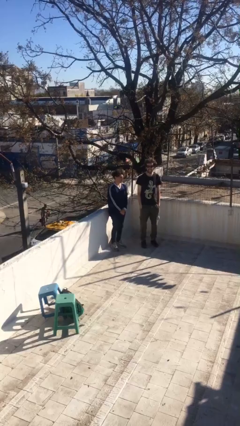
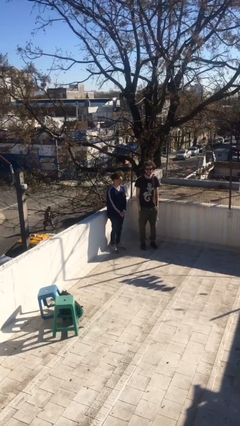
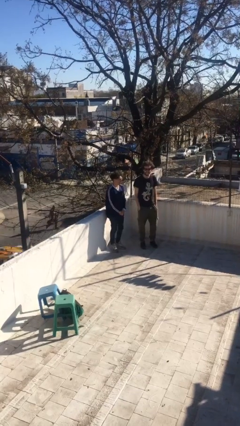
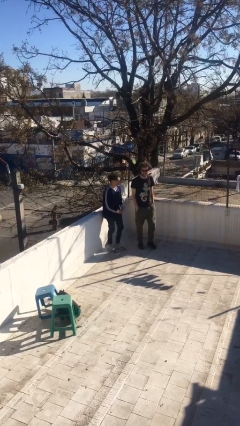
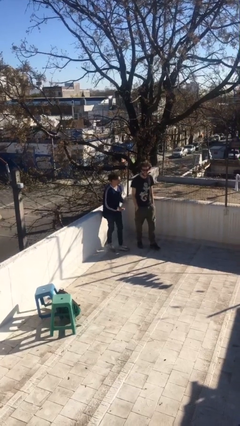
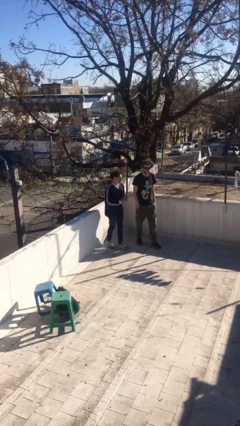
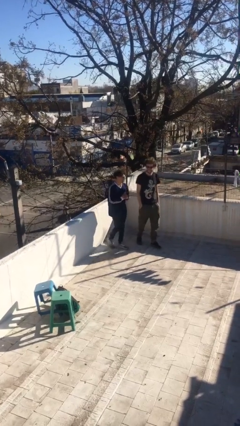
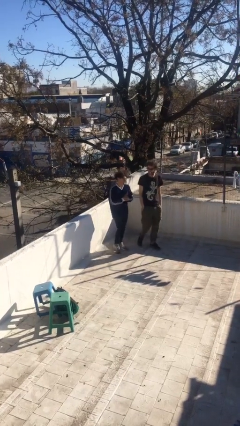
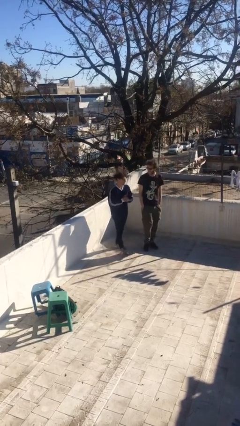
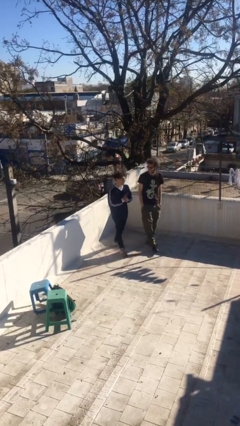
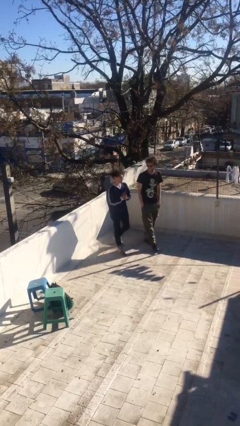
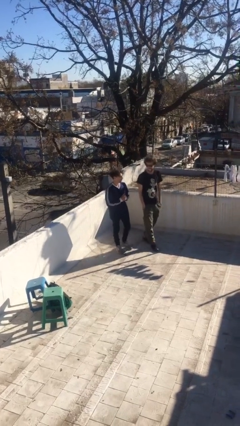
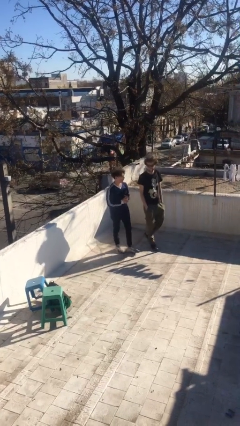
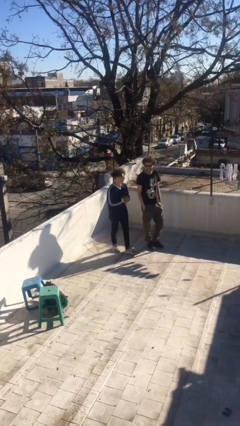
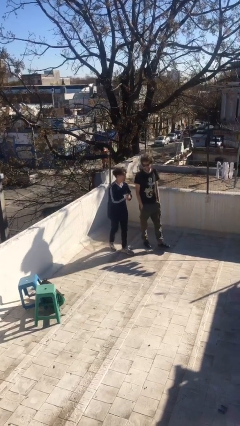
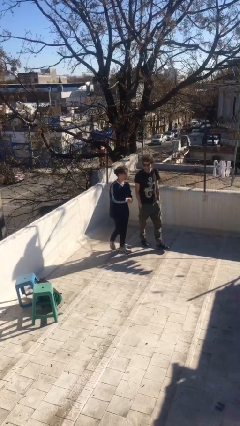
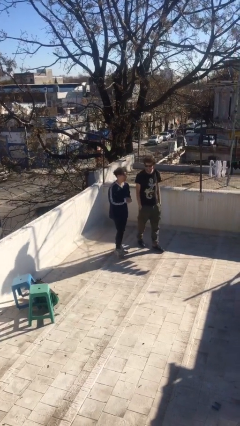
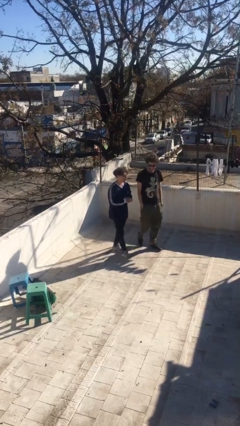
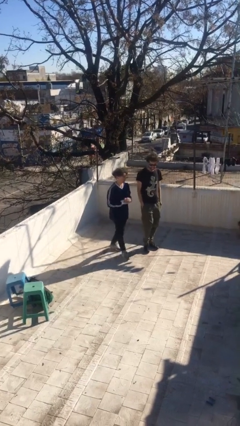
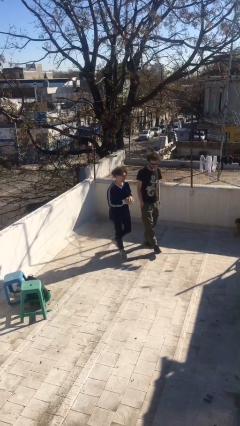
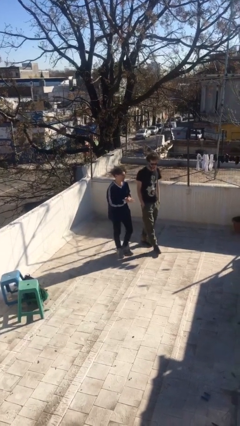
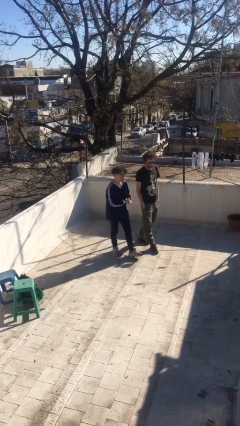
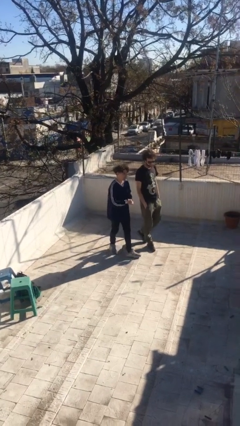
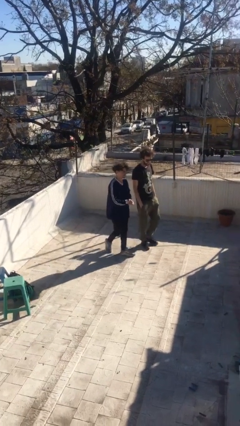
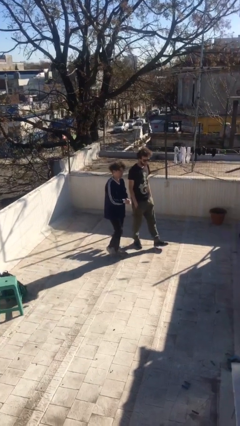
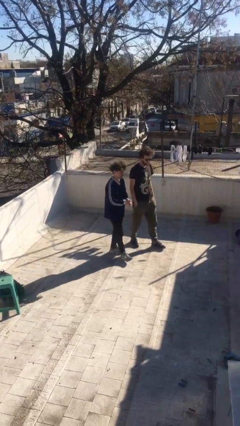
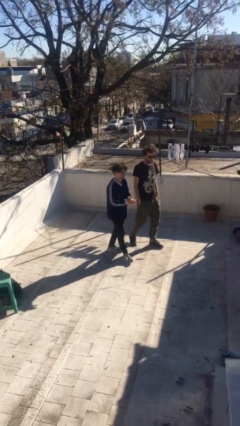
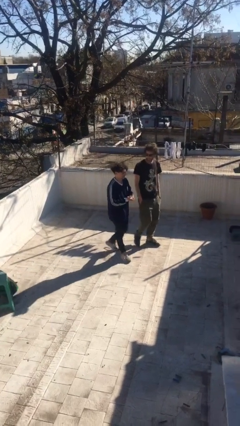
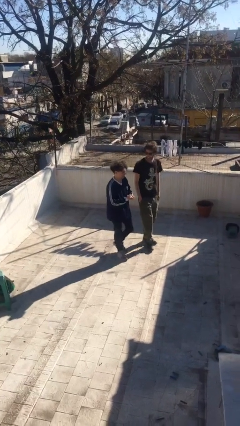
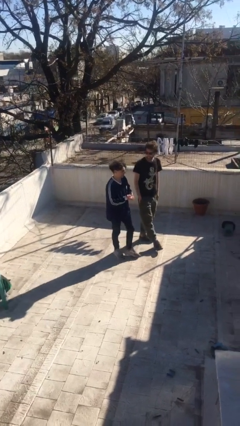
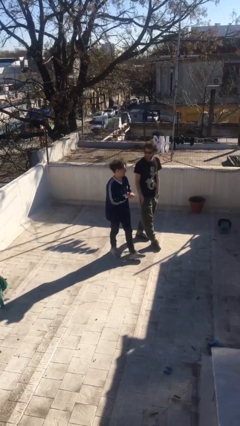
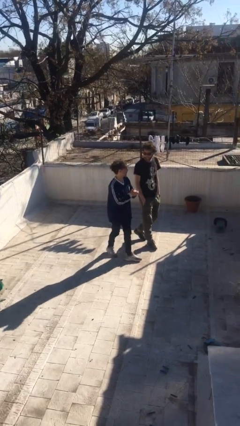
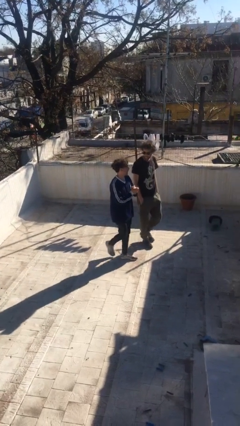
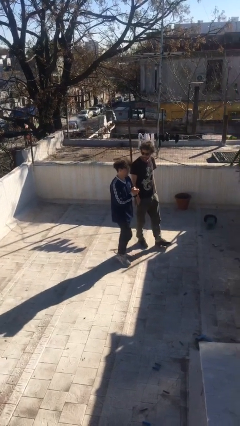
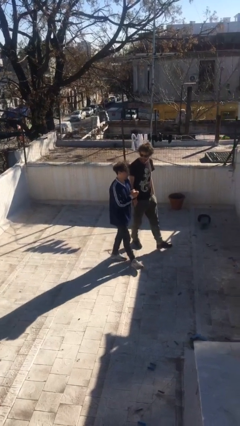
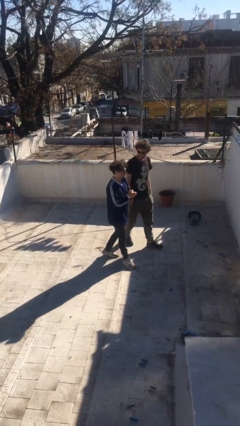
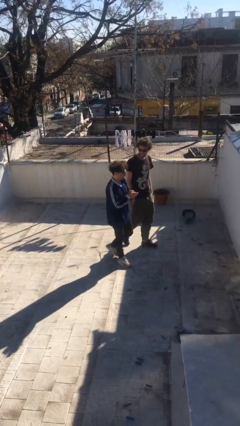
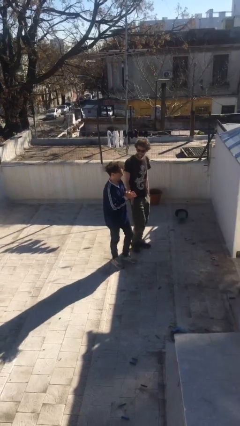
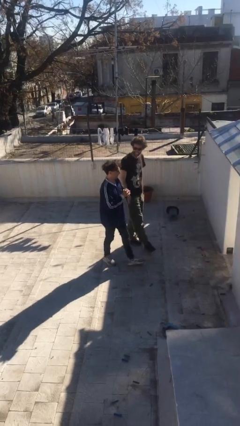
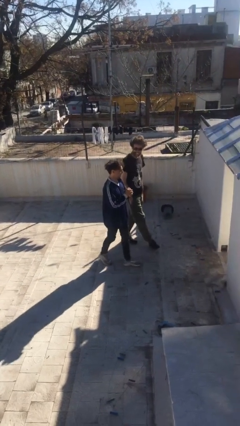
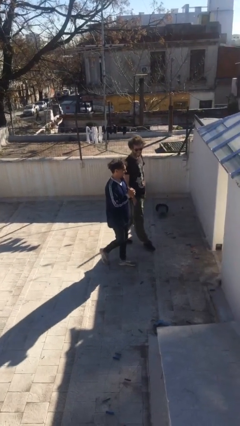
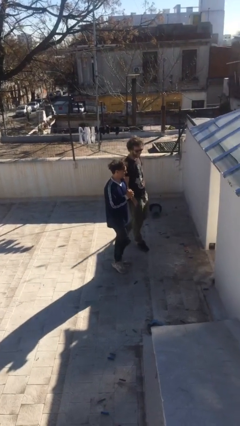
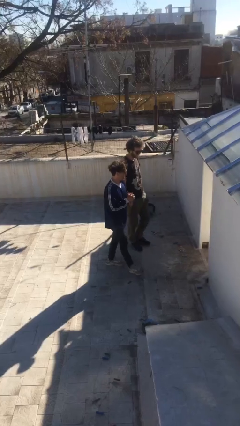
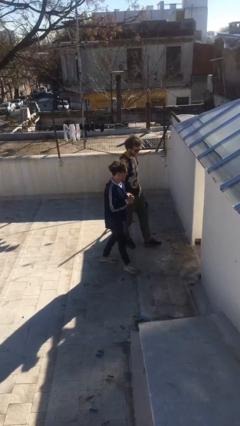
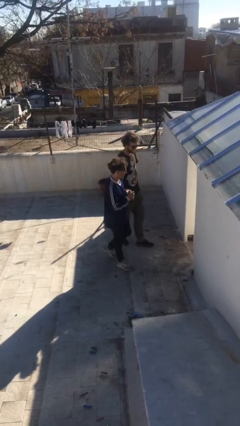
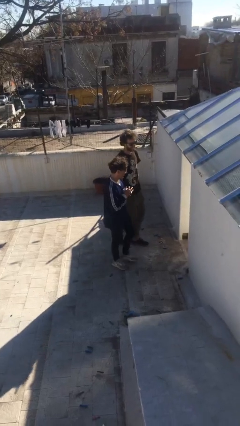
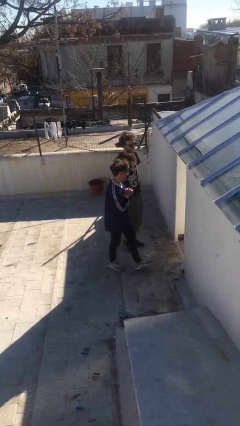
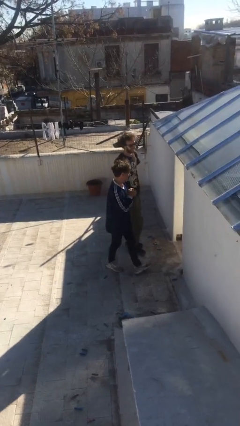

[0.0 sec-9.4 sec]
person talks to person

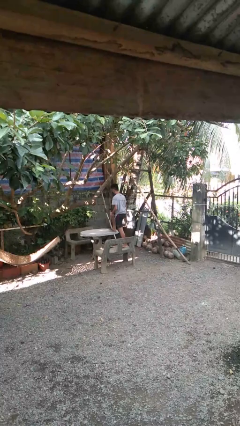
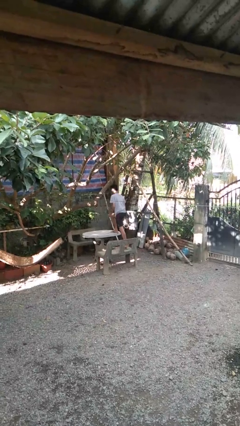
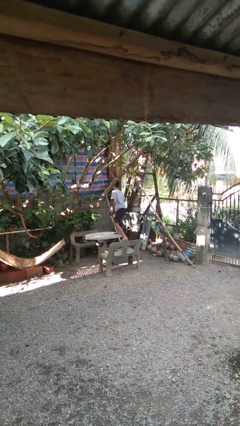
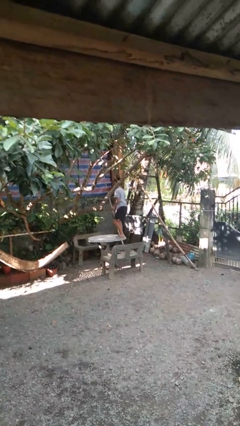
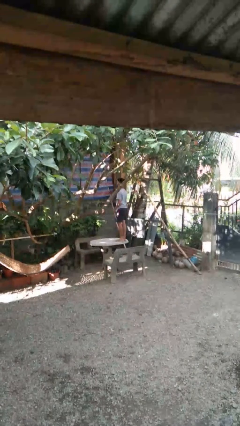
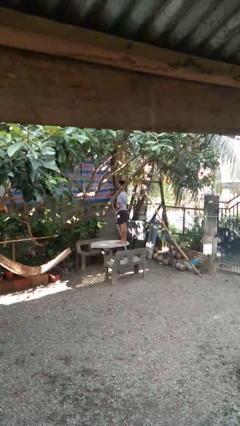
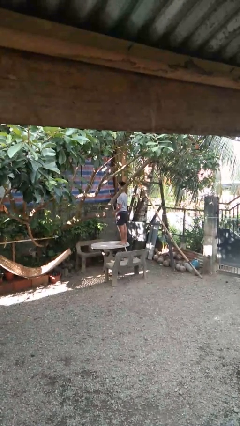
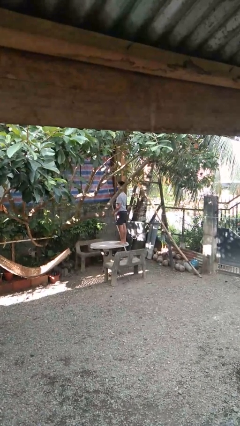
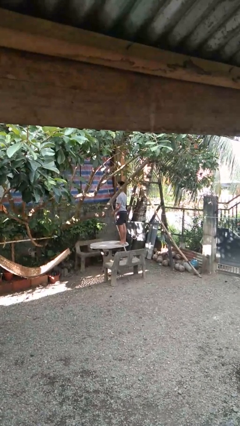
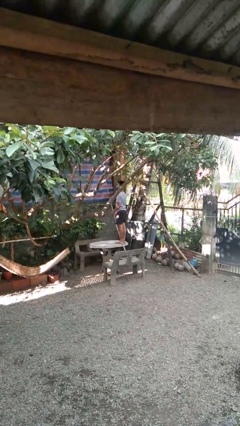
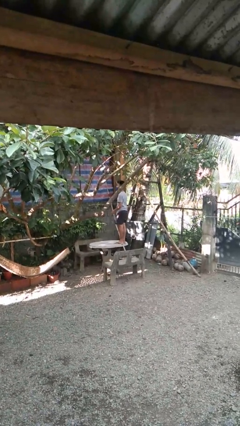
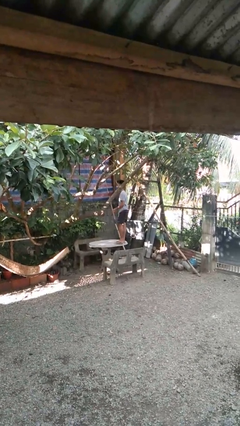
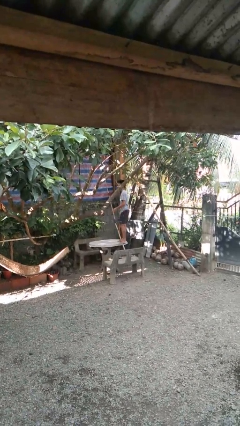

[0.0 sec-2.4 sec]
person climbs on table

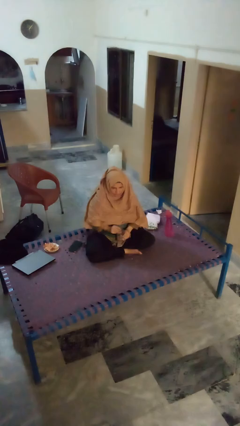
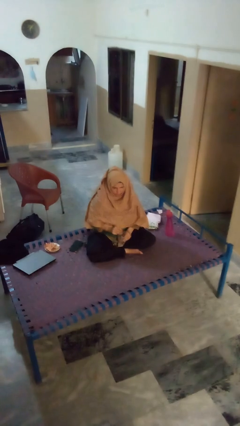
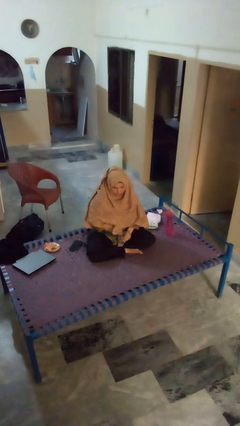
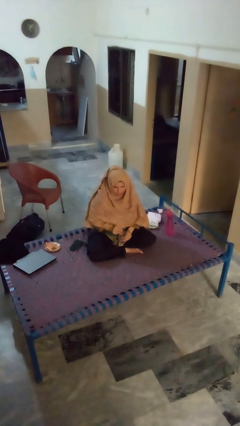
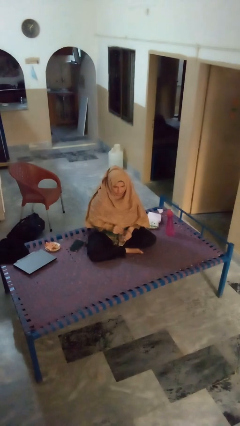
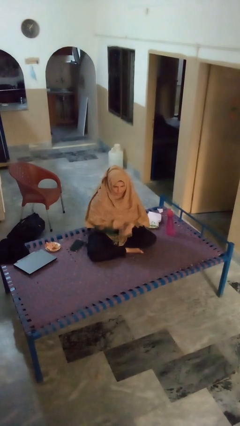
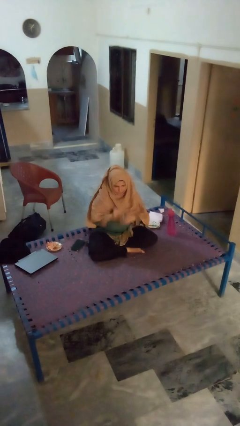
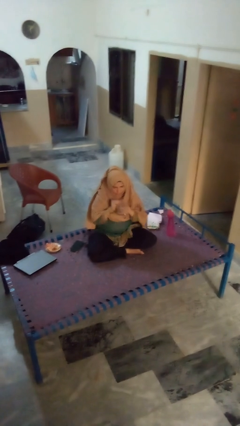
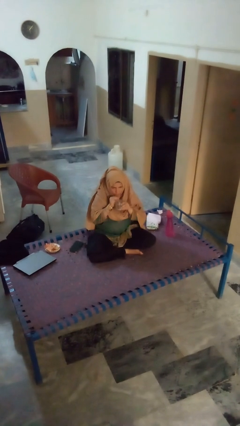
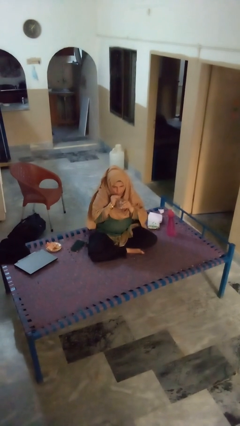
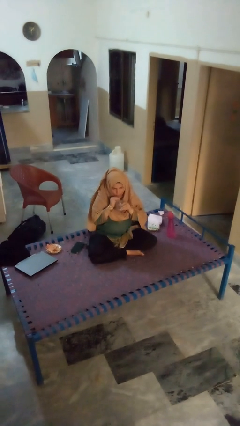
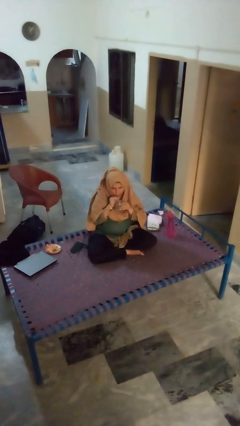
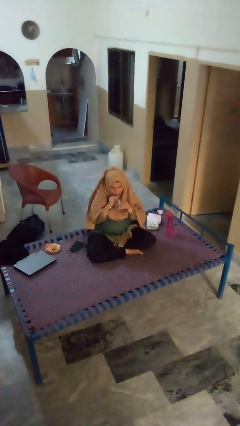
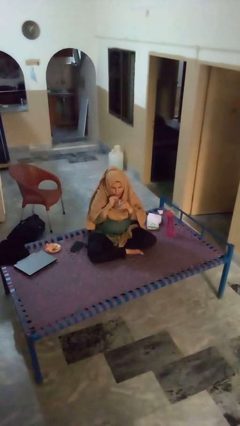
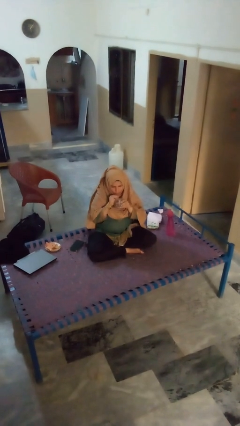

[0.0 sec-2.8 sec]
person drinks from straw

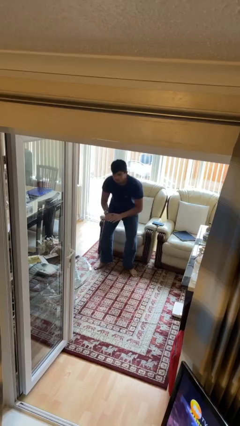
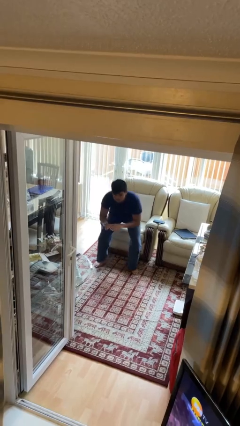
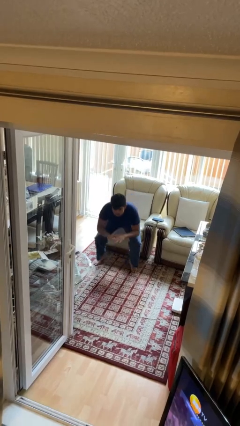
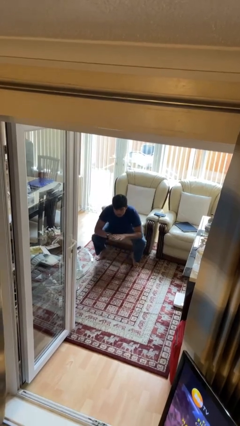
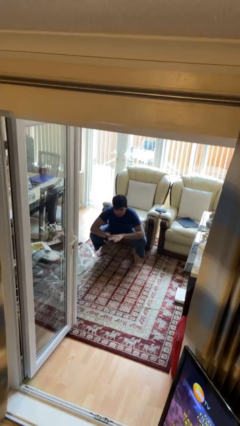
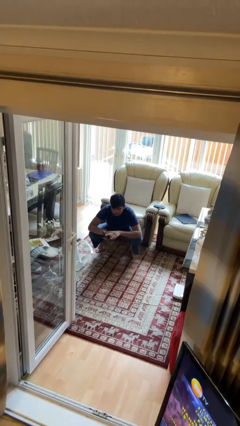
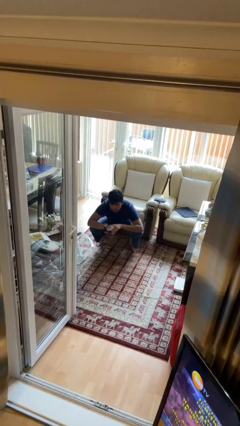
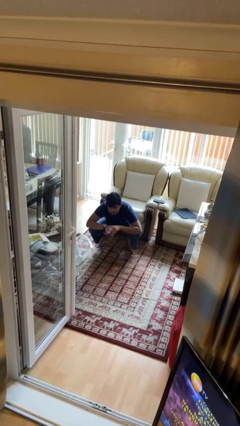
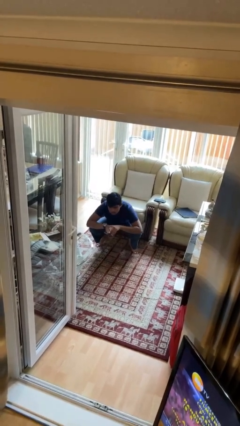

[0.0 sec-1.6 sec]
person squats

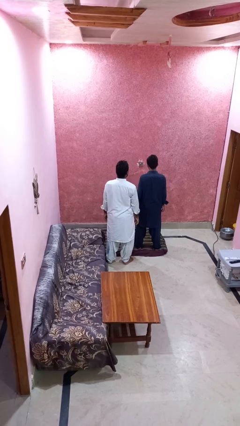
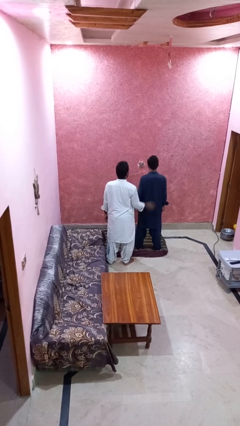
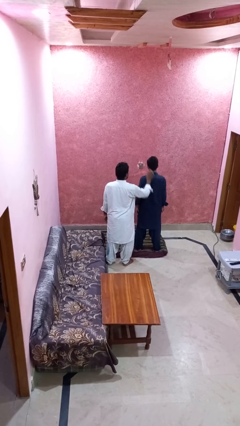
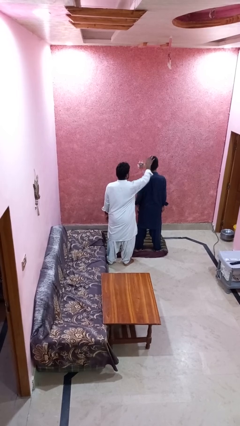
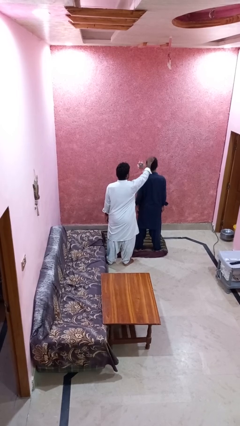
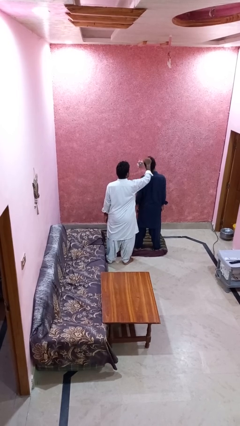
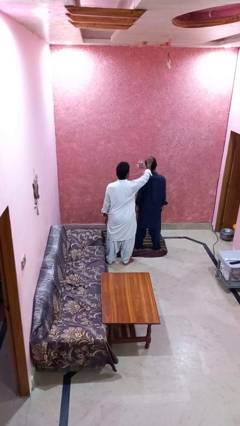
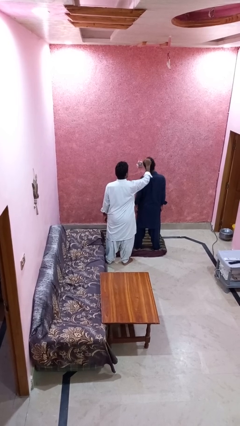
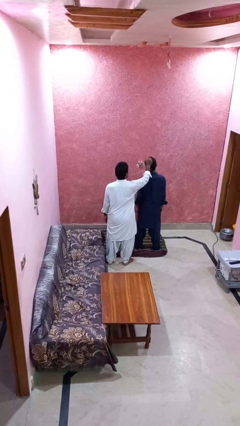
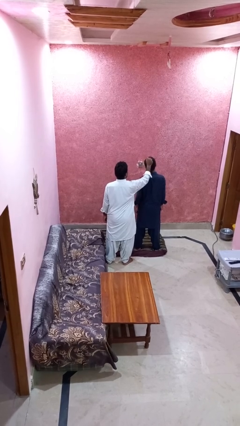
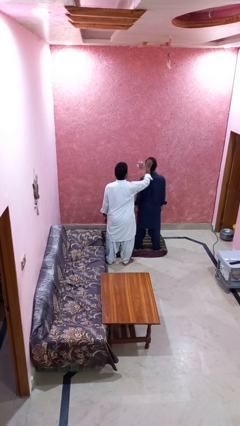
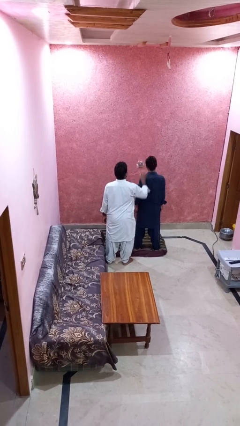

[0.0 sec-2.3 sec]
person grabs person by hair
